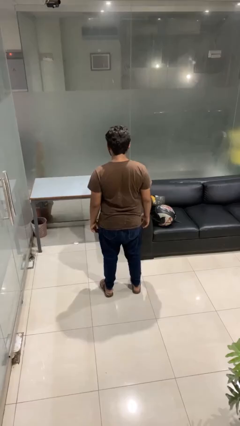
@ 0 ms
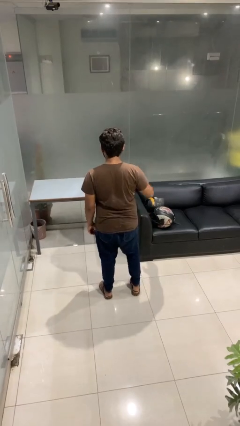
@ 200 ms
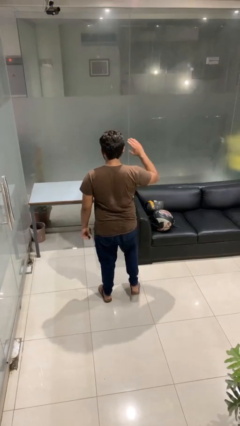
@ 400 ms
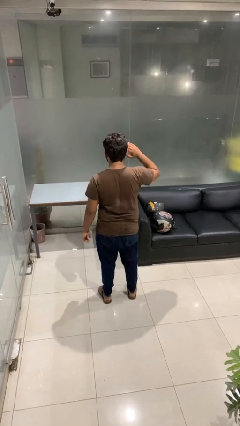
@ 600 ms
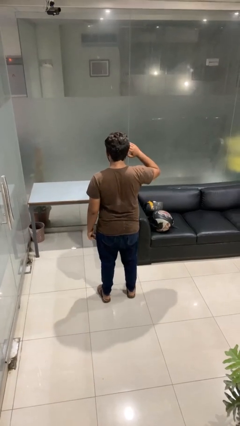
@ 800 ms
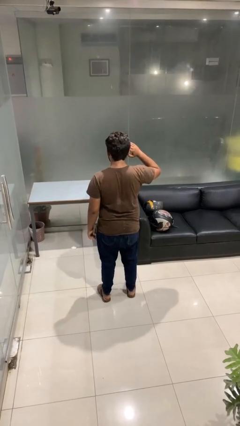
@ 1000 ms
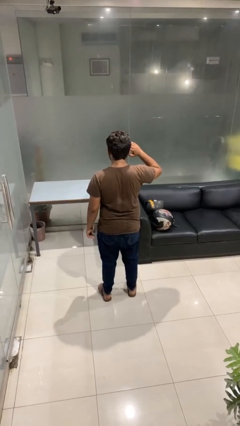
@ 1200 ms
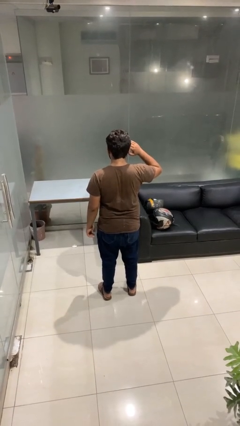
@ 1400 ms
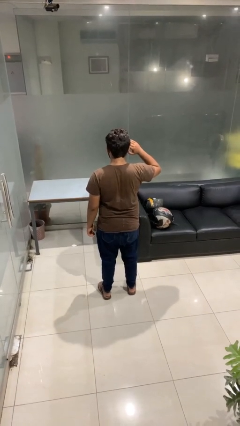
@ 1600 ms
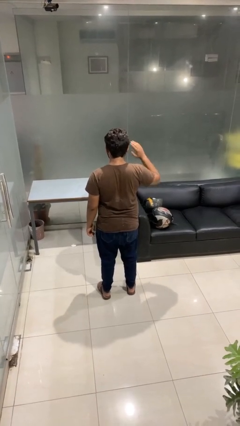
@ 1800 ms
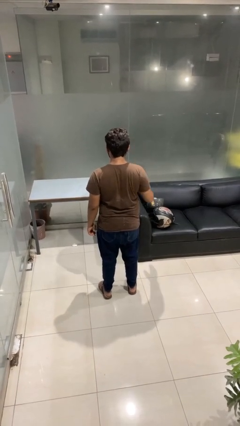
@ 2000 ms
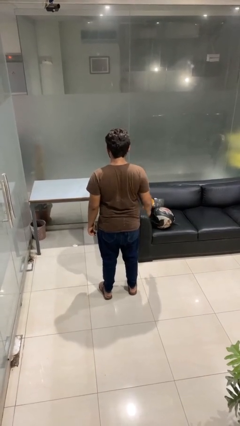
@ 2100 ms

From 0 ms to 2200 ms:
person salutes

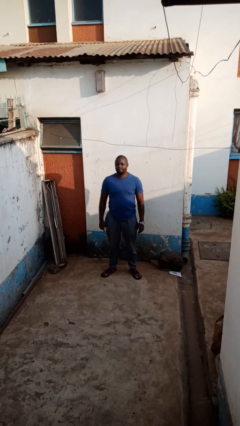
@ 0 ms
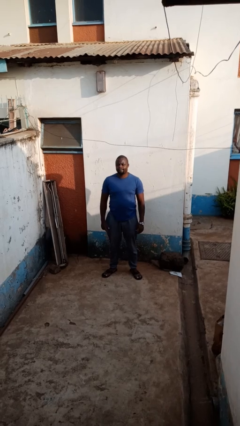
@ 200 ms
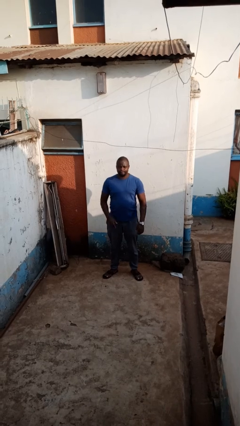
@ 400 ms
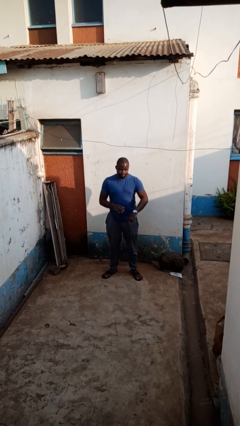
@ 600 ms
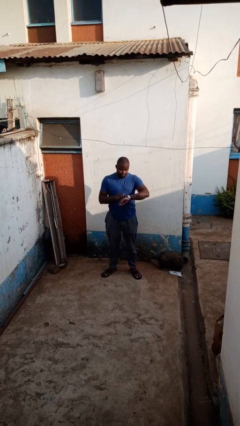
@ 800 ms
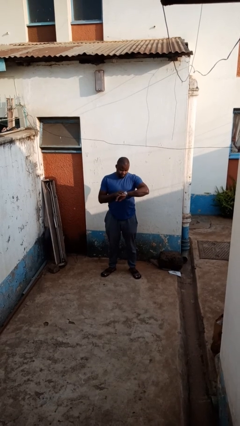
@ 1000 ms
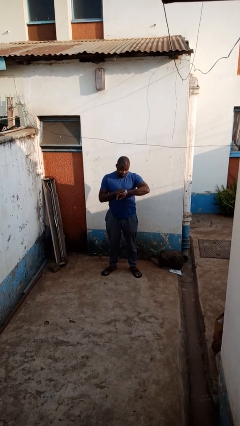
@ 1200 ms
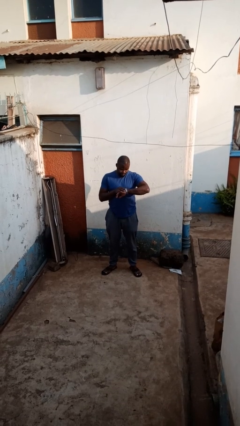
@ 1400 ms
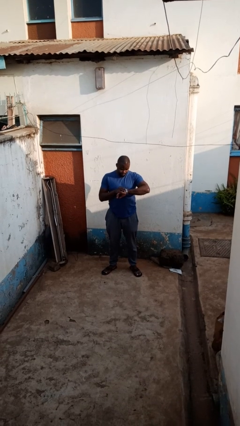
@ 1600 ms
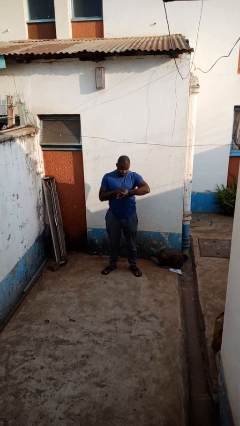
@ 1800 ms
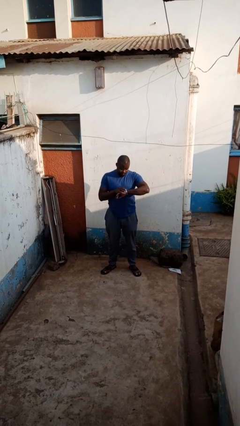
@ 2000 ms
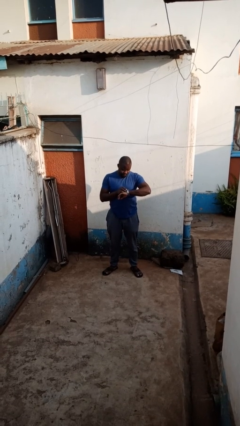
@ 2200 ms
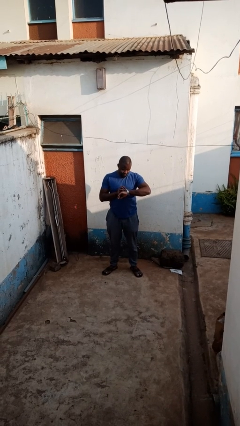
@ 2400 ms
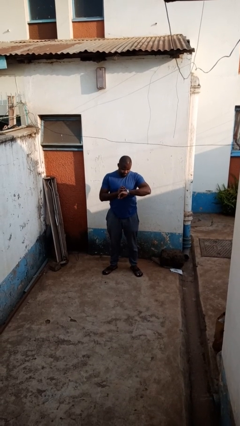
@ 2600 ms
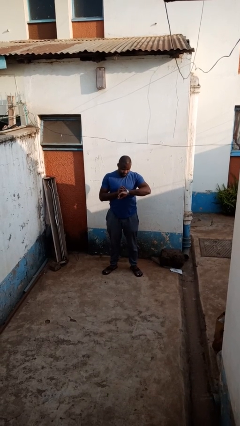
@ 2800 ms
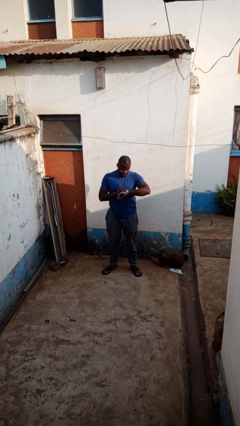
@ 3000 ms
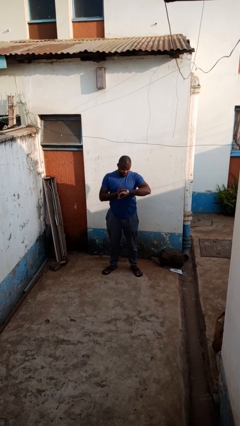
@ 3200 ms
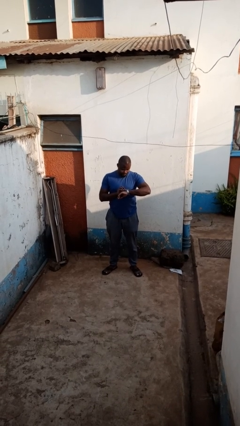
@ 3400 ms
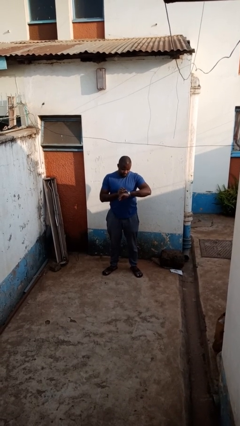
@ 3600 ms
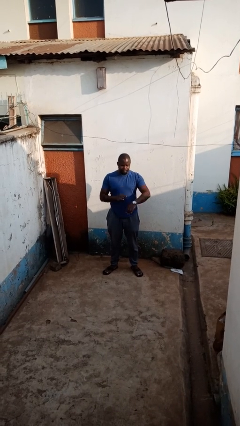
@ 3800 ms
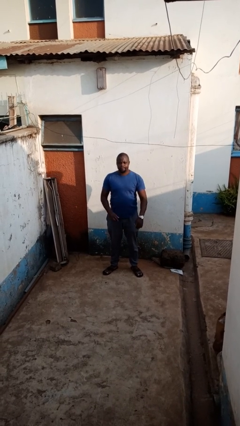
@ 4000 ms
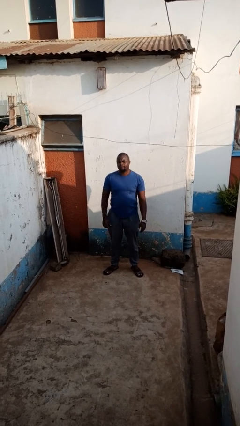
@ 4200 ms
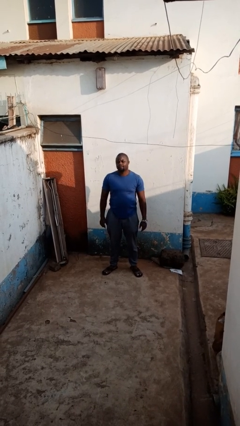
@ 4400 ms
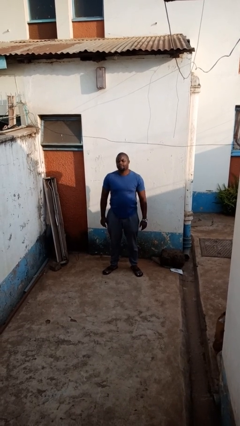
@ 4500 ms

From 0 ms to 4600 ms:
person looks at wristwatch

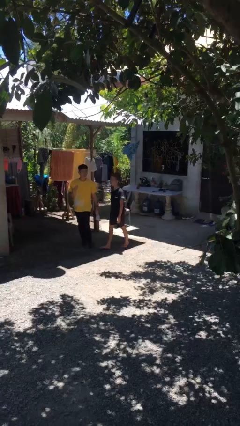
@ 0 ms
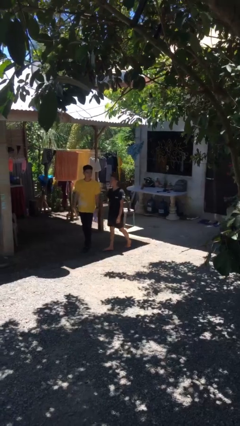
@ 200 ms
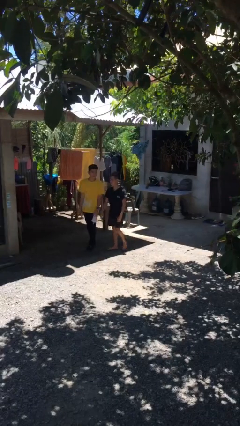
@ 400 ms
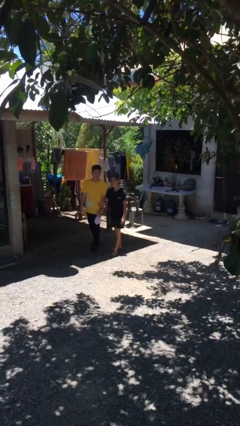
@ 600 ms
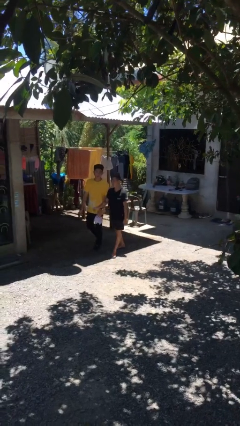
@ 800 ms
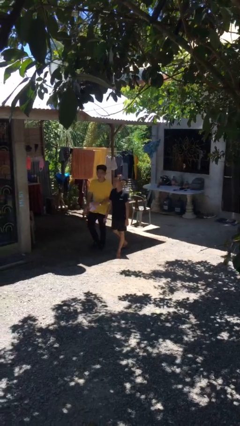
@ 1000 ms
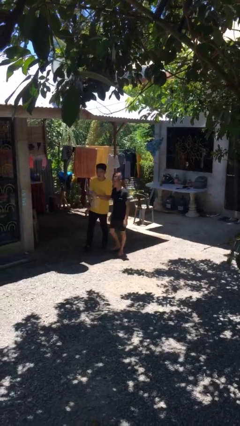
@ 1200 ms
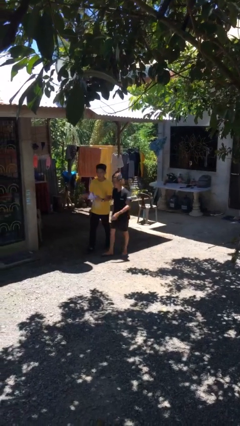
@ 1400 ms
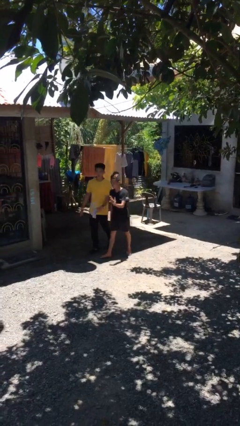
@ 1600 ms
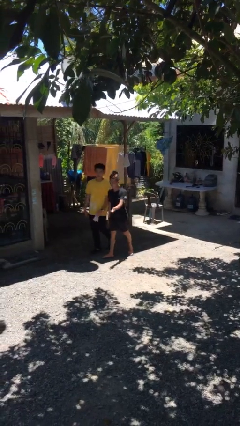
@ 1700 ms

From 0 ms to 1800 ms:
person talks to person

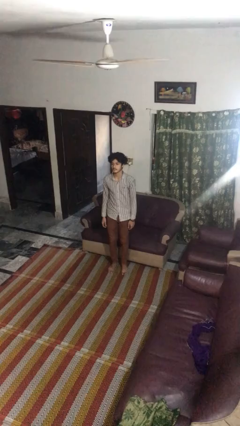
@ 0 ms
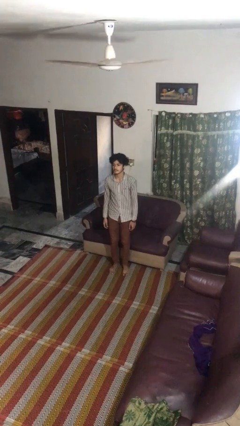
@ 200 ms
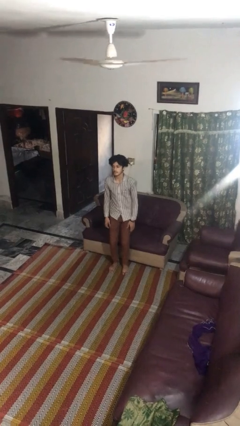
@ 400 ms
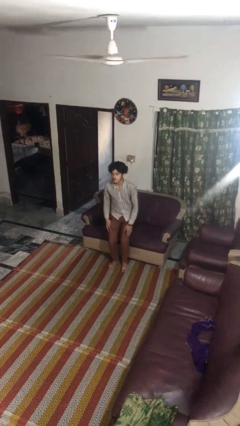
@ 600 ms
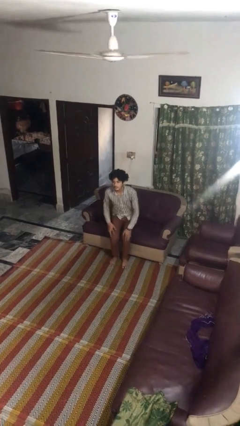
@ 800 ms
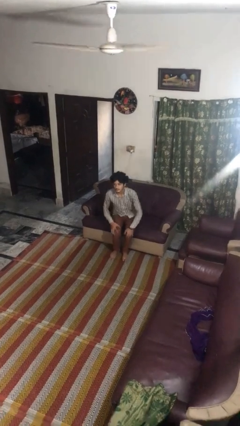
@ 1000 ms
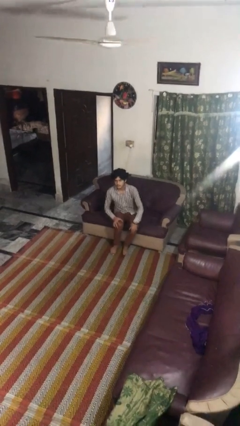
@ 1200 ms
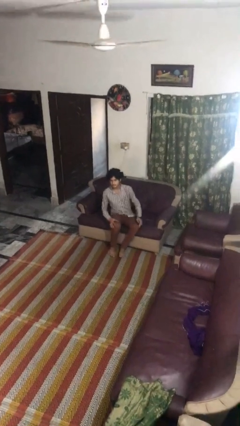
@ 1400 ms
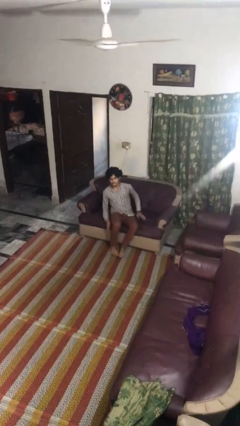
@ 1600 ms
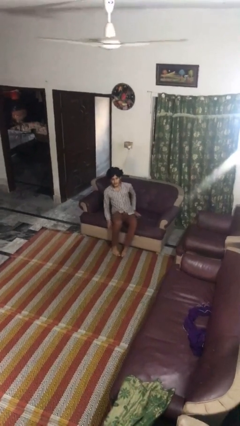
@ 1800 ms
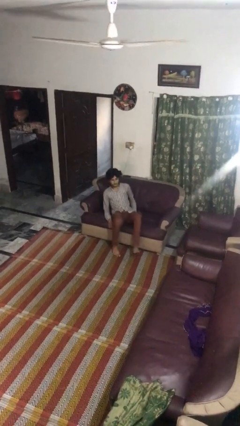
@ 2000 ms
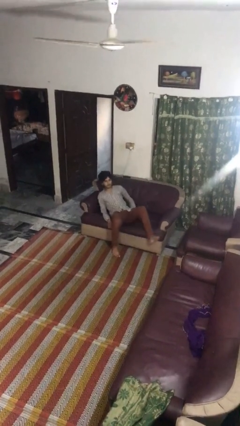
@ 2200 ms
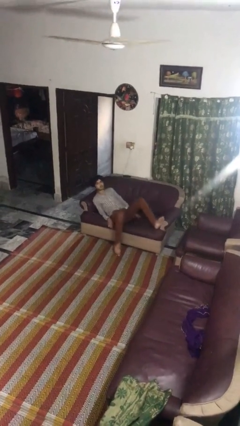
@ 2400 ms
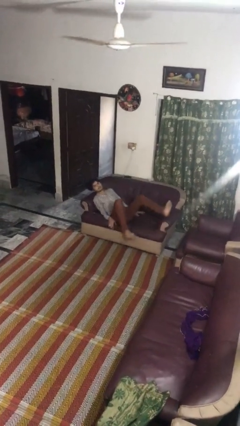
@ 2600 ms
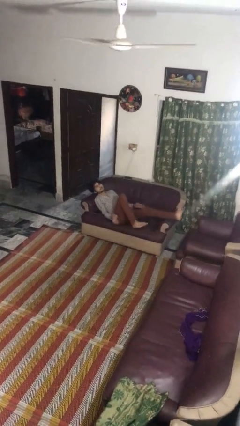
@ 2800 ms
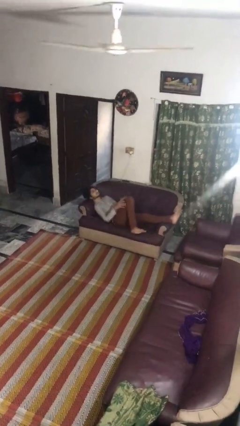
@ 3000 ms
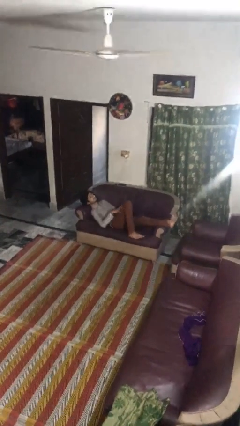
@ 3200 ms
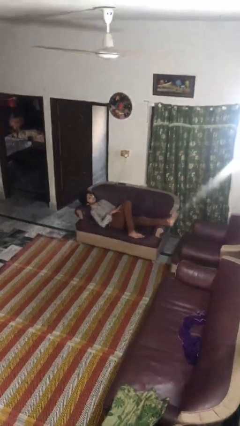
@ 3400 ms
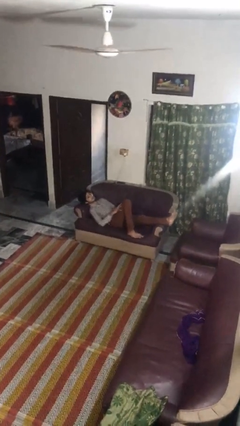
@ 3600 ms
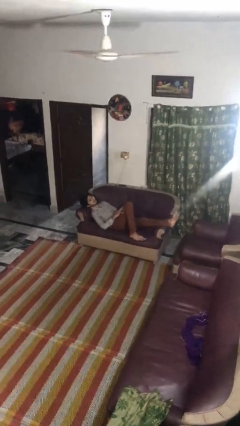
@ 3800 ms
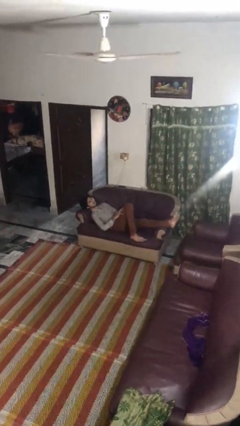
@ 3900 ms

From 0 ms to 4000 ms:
person lies down on couch

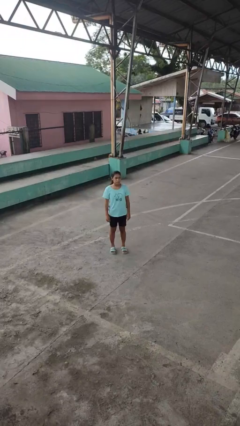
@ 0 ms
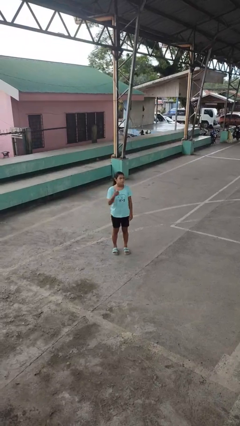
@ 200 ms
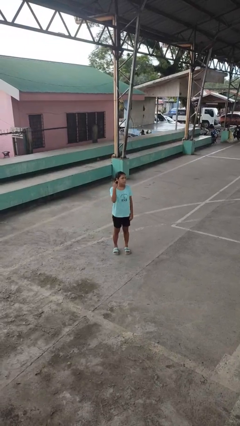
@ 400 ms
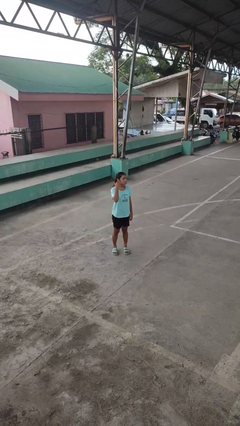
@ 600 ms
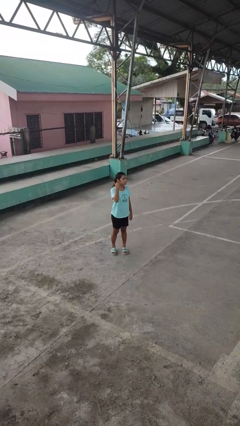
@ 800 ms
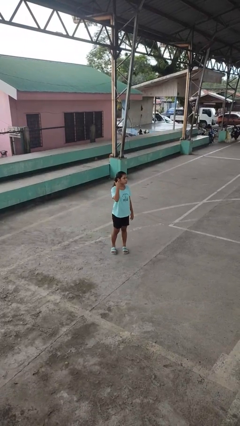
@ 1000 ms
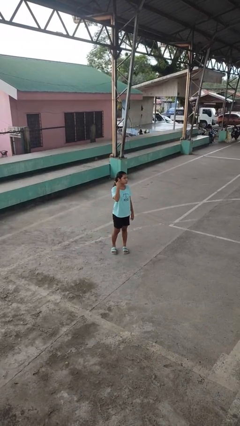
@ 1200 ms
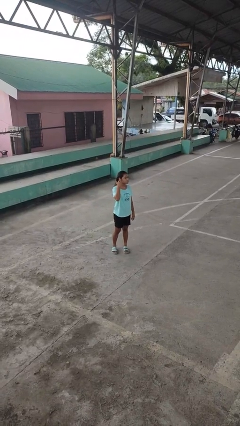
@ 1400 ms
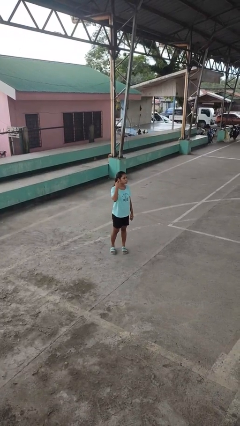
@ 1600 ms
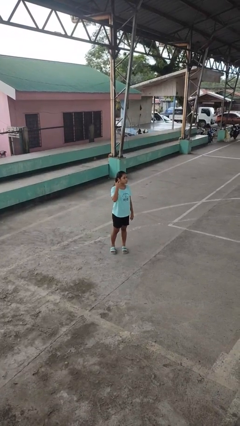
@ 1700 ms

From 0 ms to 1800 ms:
person gestures listen closely

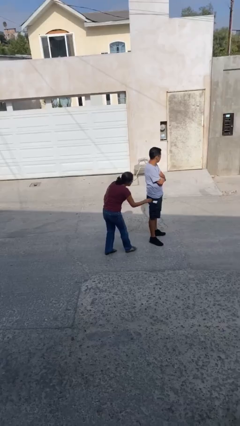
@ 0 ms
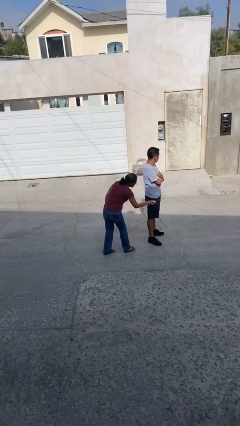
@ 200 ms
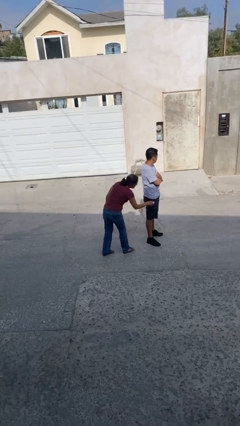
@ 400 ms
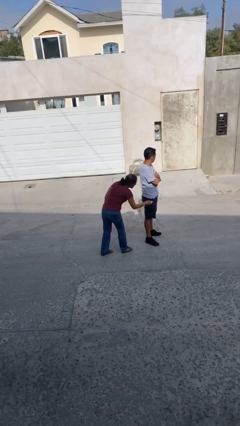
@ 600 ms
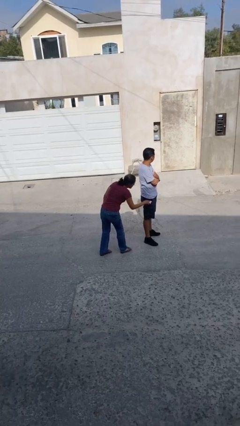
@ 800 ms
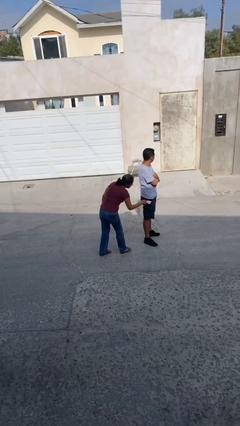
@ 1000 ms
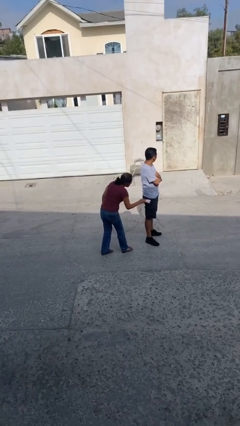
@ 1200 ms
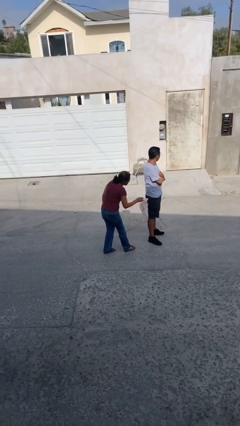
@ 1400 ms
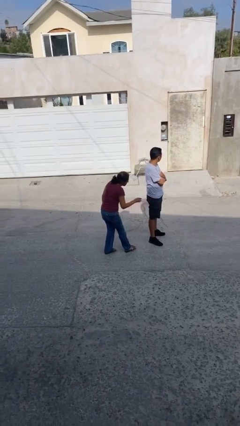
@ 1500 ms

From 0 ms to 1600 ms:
person steals object from person

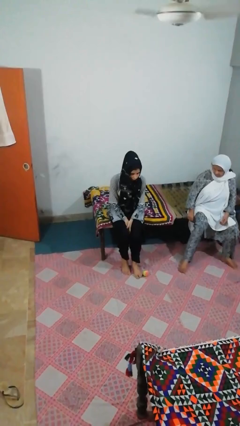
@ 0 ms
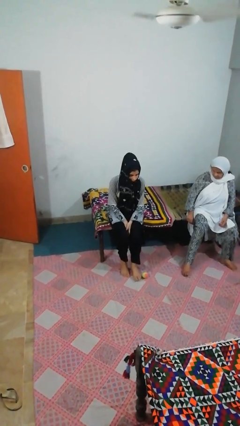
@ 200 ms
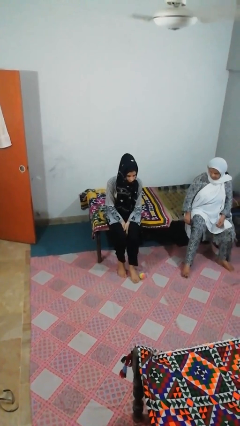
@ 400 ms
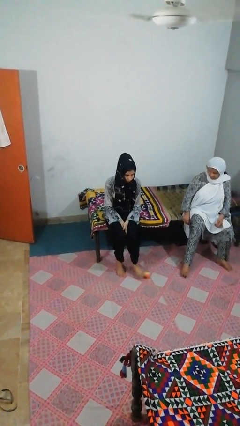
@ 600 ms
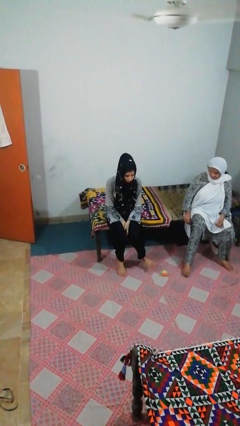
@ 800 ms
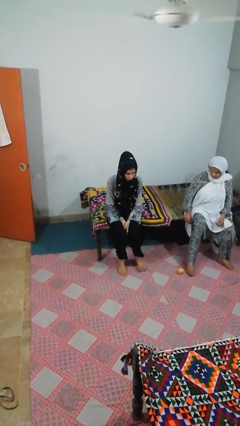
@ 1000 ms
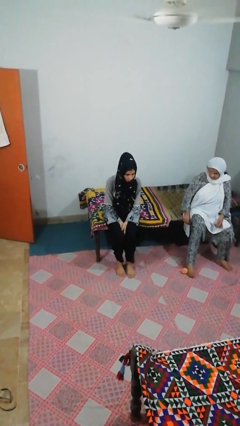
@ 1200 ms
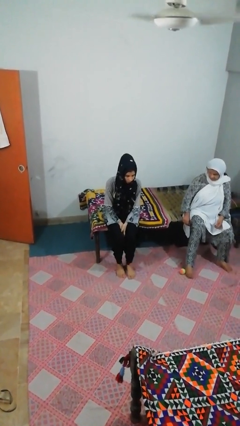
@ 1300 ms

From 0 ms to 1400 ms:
person kicks object to person
